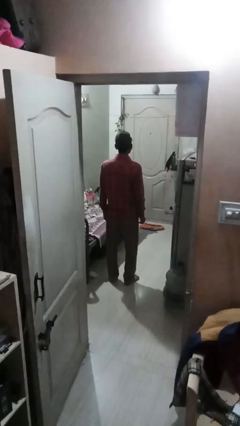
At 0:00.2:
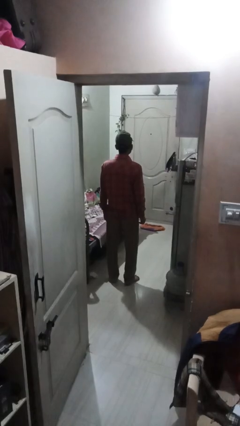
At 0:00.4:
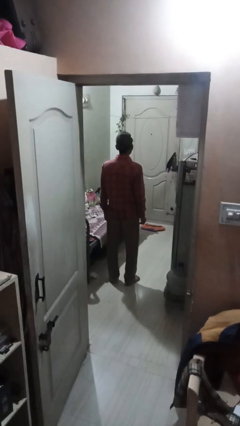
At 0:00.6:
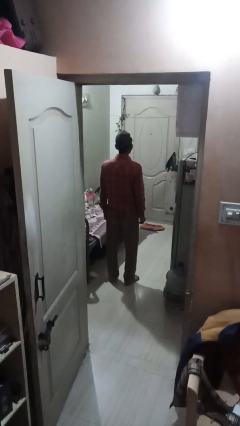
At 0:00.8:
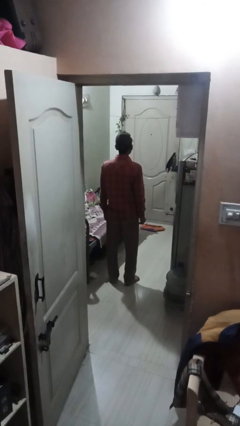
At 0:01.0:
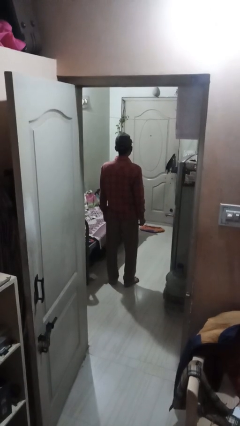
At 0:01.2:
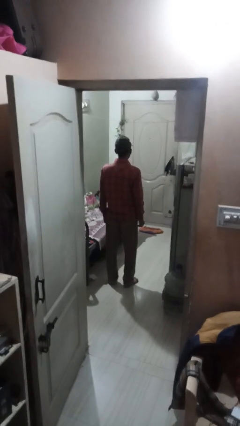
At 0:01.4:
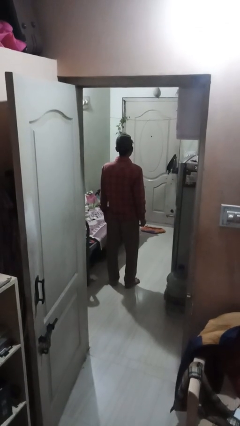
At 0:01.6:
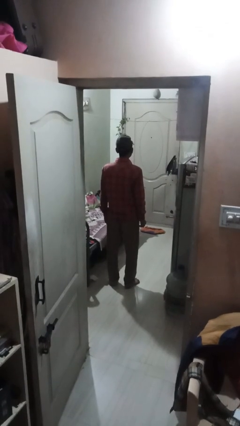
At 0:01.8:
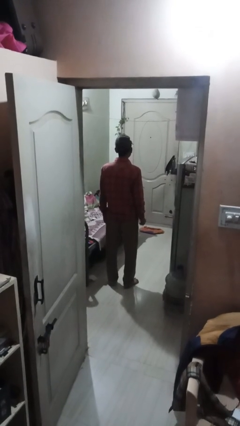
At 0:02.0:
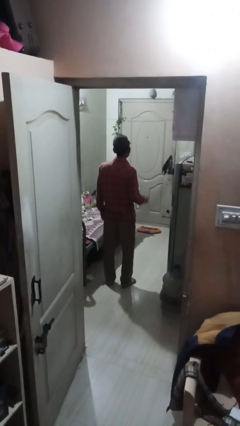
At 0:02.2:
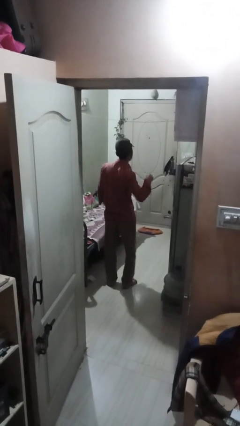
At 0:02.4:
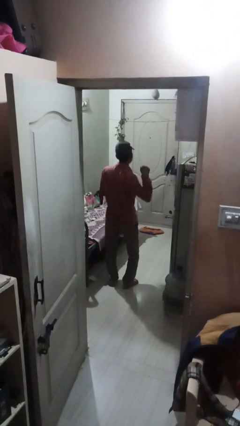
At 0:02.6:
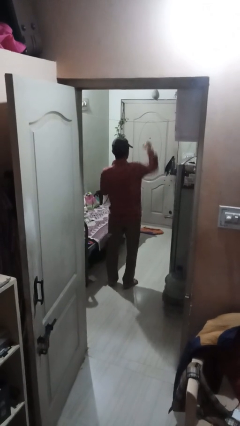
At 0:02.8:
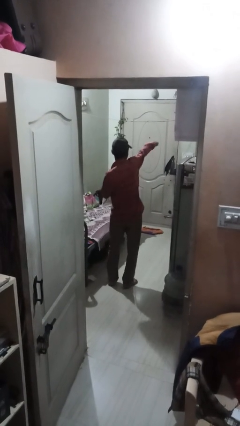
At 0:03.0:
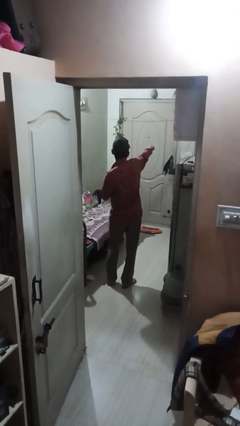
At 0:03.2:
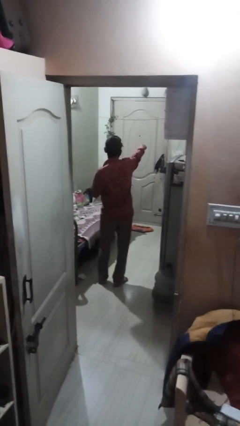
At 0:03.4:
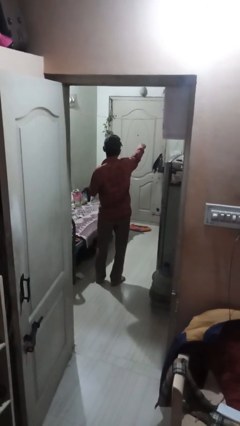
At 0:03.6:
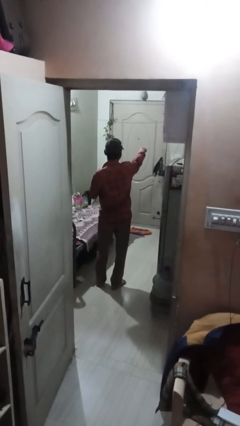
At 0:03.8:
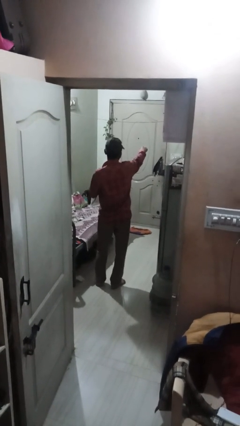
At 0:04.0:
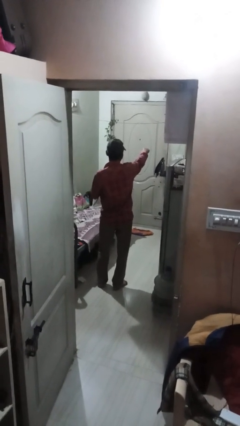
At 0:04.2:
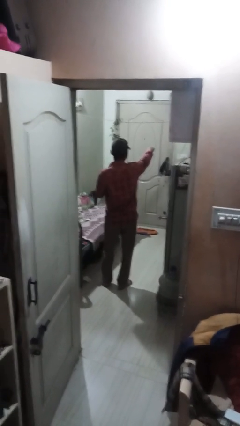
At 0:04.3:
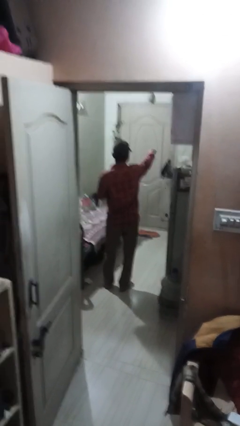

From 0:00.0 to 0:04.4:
person punches

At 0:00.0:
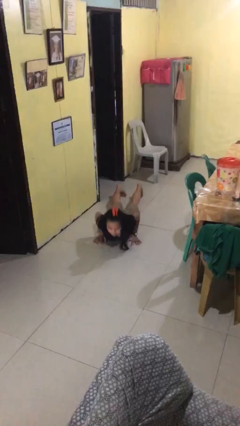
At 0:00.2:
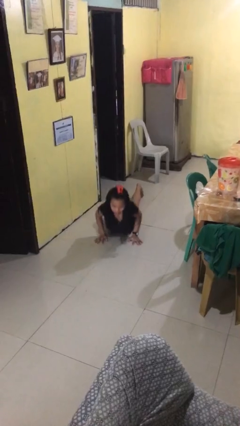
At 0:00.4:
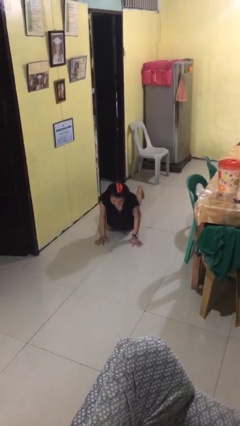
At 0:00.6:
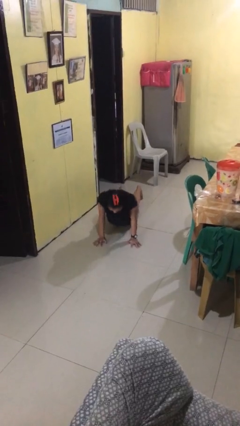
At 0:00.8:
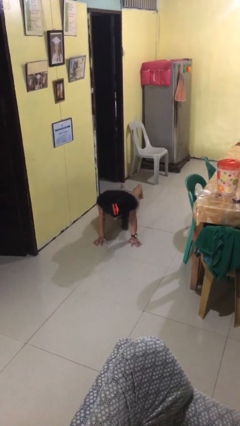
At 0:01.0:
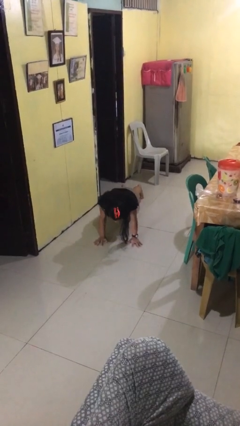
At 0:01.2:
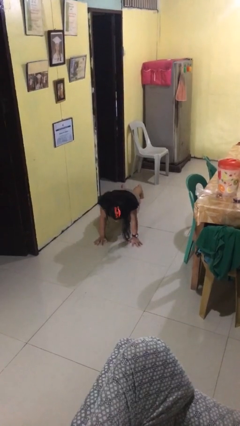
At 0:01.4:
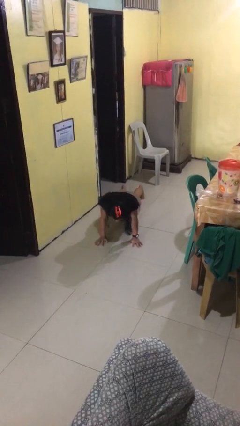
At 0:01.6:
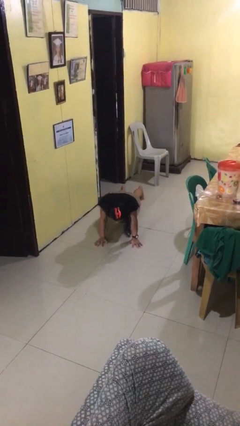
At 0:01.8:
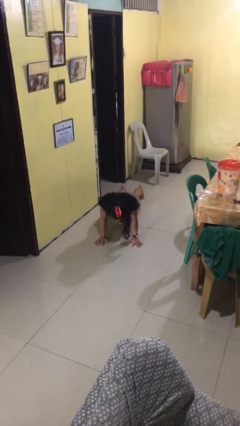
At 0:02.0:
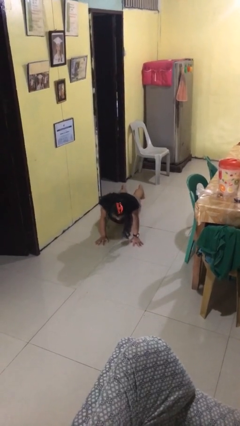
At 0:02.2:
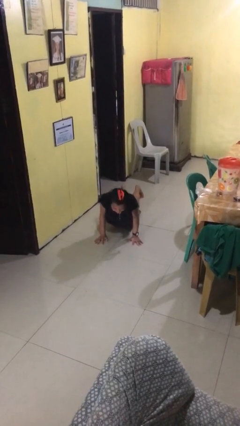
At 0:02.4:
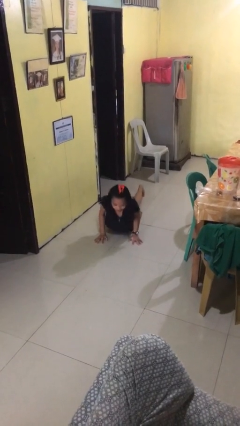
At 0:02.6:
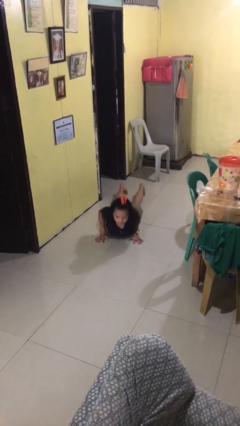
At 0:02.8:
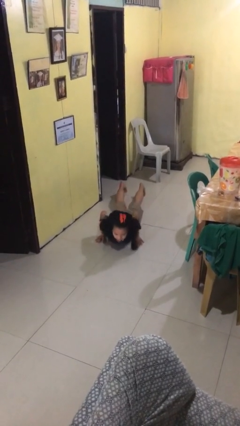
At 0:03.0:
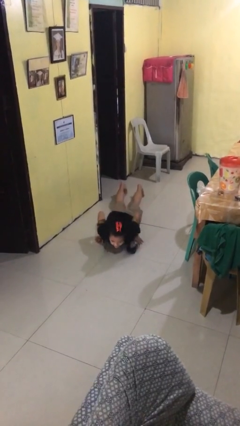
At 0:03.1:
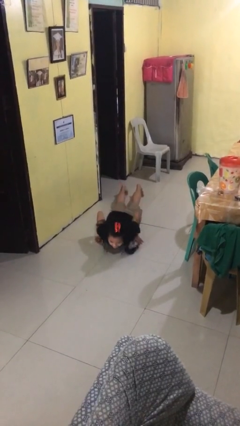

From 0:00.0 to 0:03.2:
person exercises with pushup

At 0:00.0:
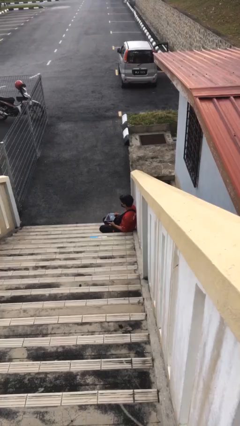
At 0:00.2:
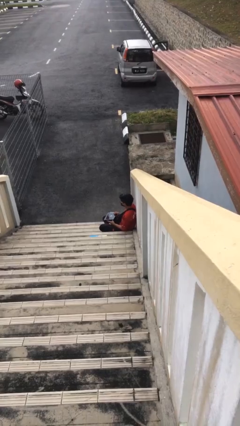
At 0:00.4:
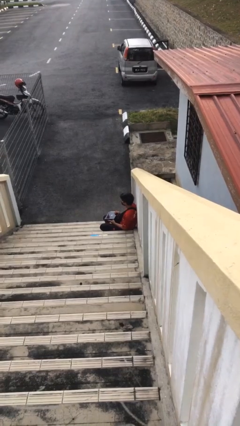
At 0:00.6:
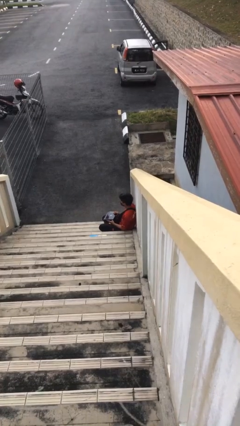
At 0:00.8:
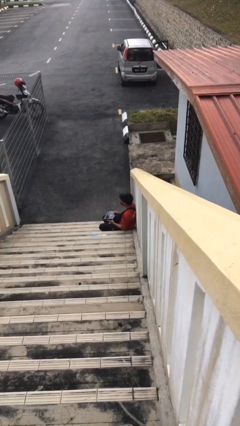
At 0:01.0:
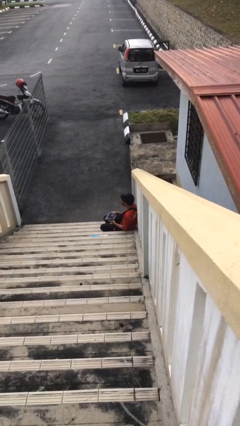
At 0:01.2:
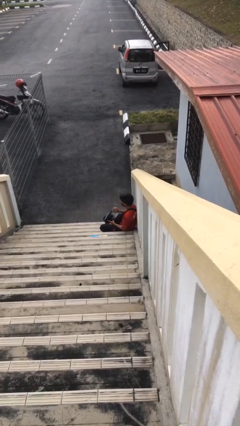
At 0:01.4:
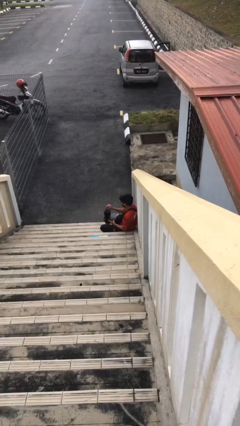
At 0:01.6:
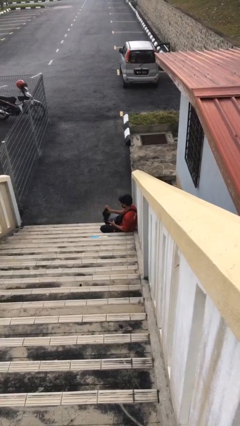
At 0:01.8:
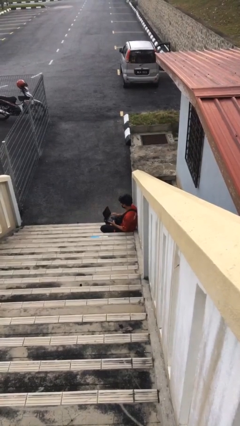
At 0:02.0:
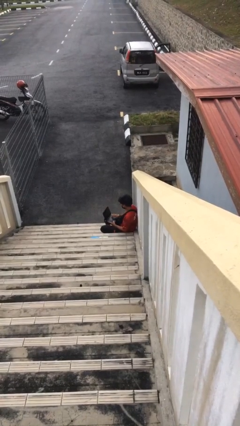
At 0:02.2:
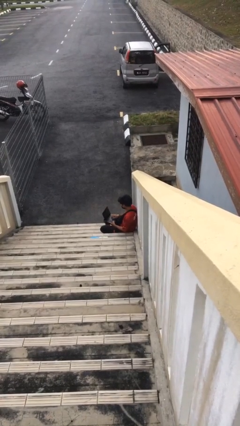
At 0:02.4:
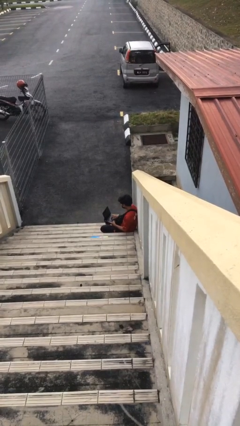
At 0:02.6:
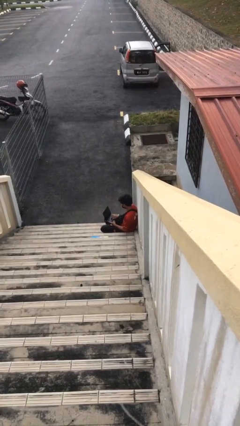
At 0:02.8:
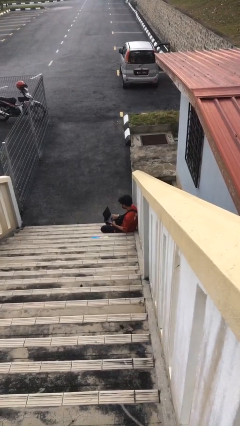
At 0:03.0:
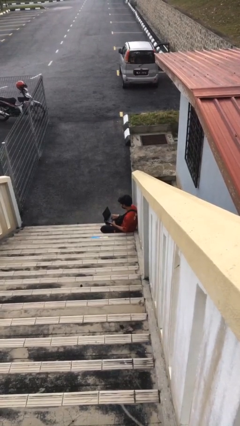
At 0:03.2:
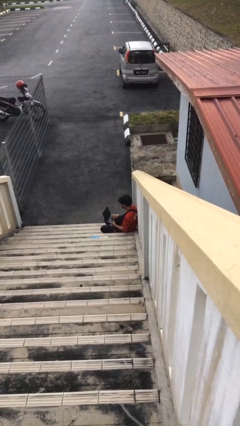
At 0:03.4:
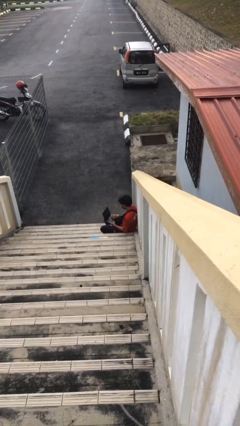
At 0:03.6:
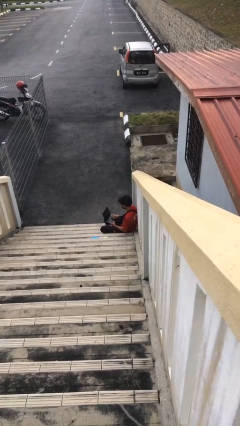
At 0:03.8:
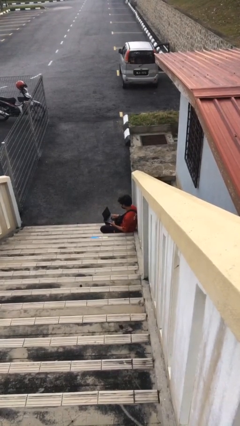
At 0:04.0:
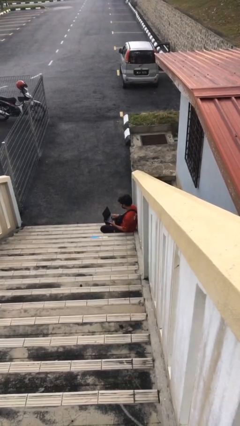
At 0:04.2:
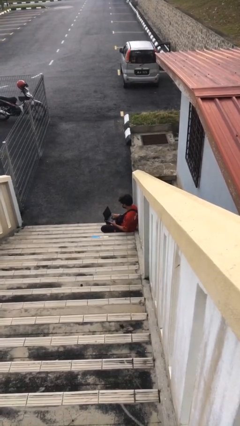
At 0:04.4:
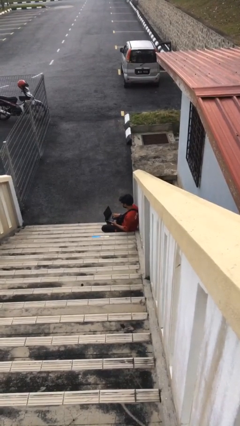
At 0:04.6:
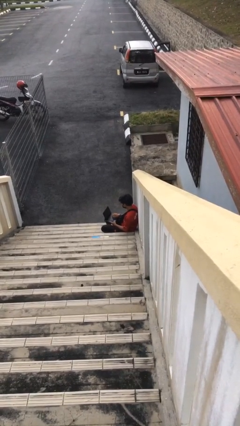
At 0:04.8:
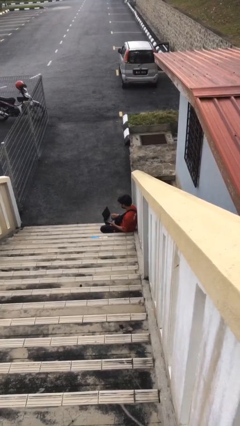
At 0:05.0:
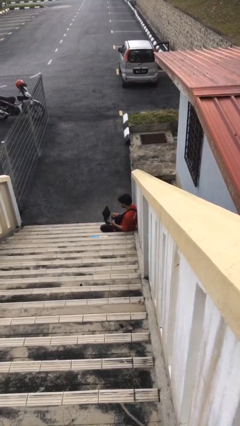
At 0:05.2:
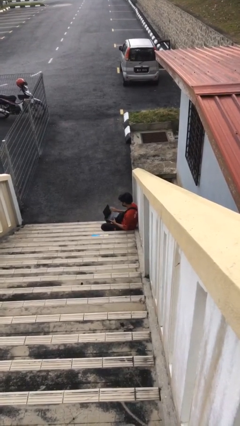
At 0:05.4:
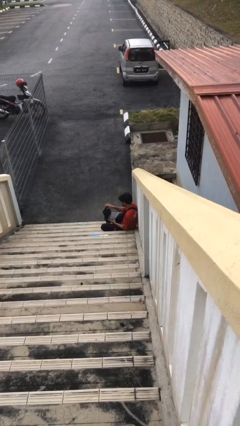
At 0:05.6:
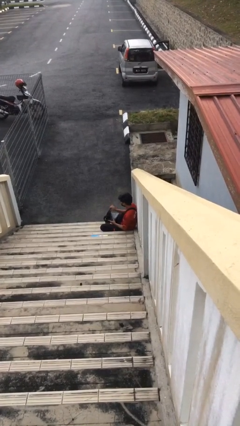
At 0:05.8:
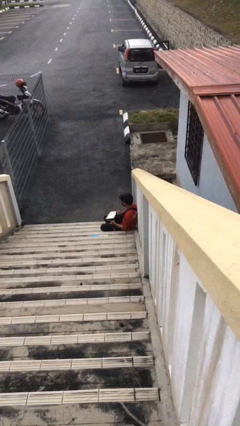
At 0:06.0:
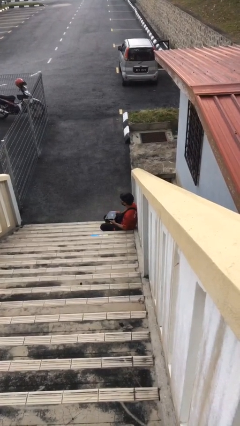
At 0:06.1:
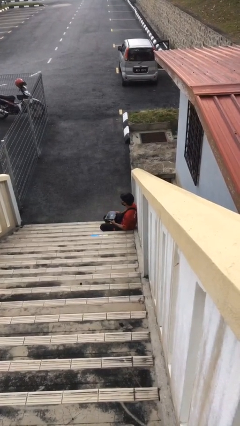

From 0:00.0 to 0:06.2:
person interacts with laptop

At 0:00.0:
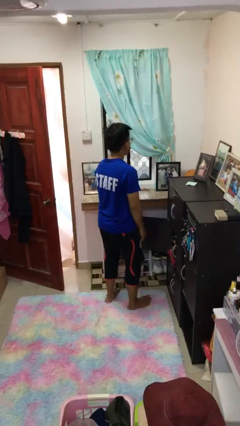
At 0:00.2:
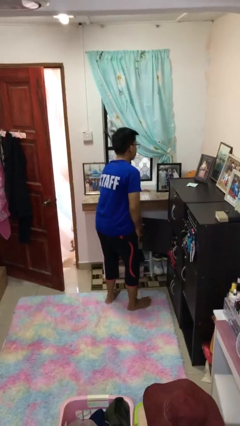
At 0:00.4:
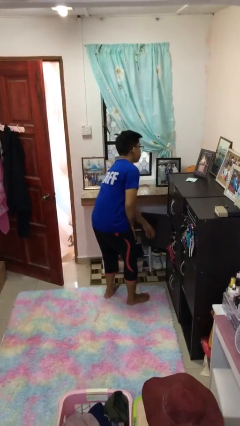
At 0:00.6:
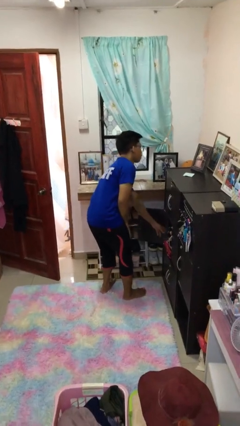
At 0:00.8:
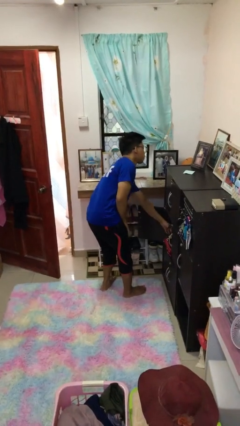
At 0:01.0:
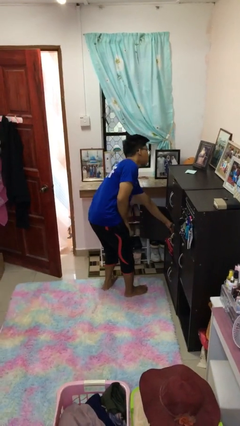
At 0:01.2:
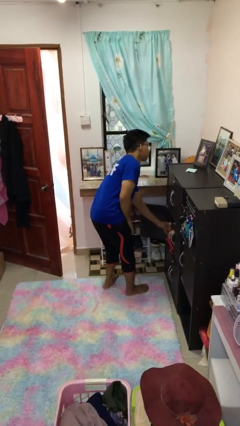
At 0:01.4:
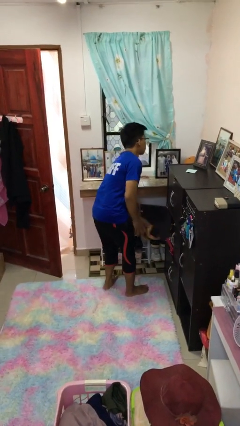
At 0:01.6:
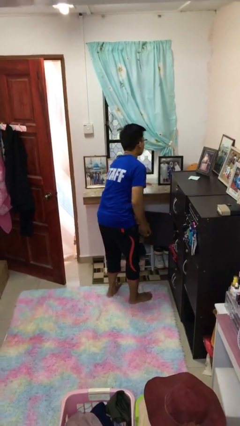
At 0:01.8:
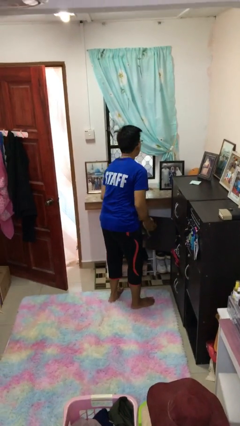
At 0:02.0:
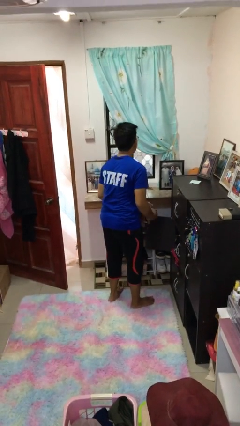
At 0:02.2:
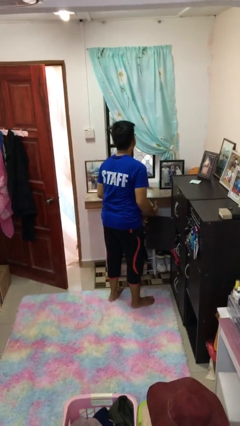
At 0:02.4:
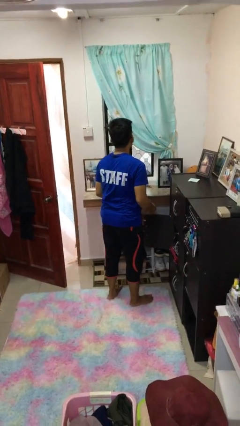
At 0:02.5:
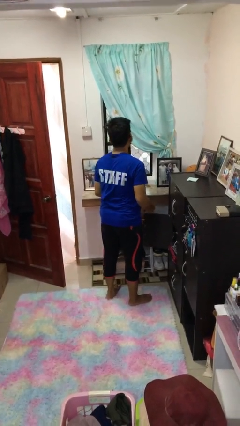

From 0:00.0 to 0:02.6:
person picks up object from cabinet

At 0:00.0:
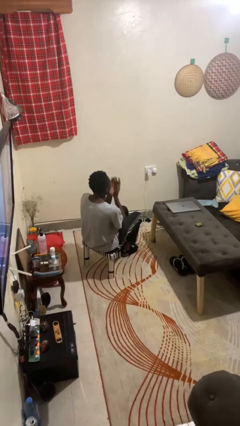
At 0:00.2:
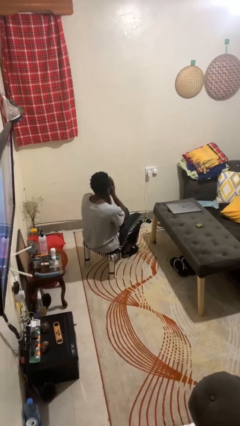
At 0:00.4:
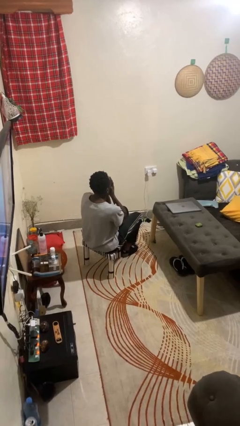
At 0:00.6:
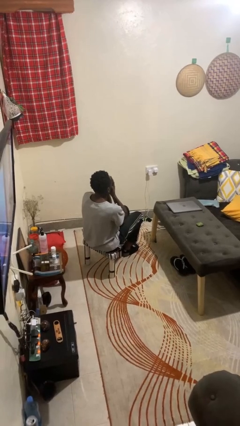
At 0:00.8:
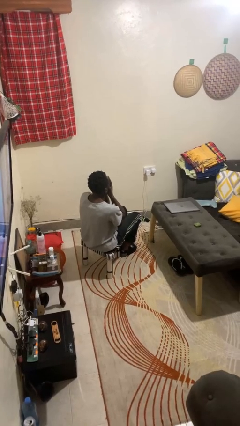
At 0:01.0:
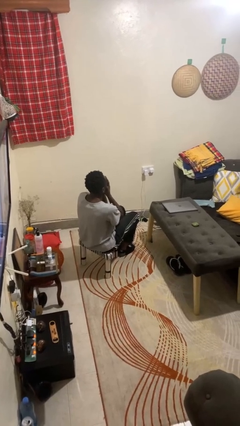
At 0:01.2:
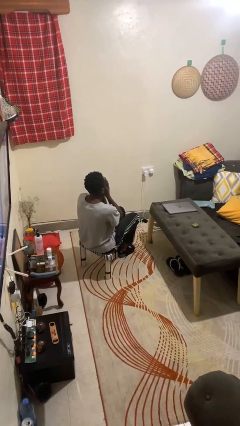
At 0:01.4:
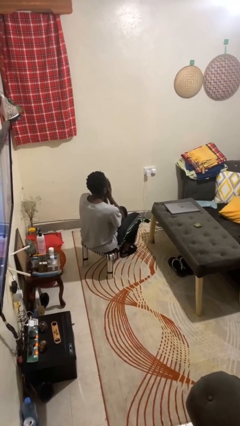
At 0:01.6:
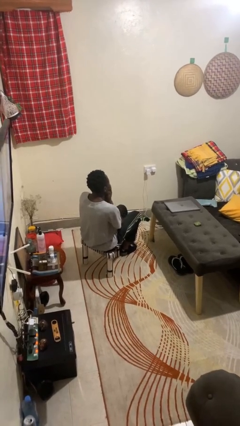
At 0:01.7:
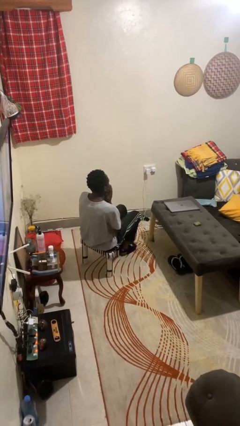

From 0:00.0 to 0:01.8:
person covers face with hands
